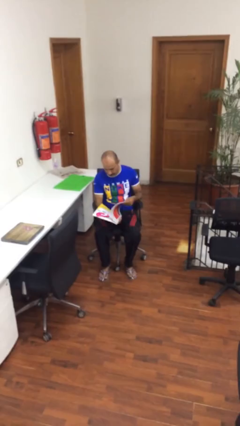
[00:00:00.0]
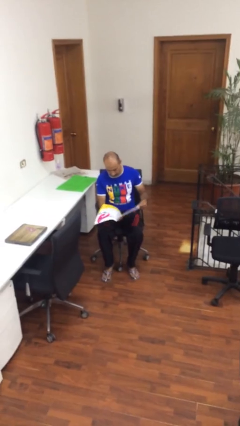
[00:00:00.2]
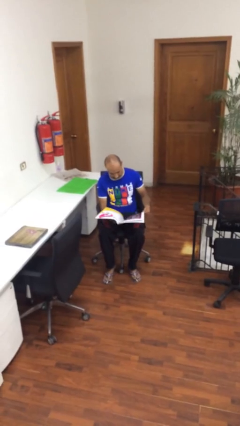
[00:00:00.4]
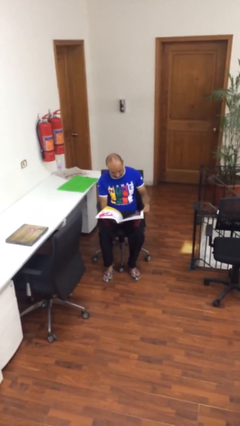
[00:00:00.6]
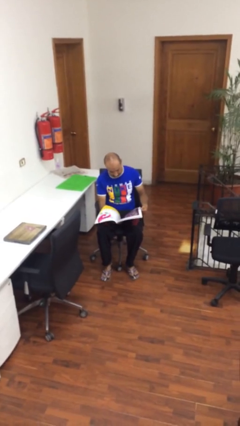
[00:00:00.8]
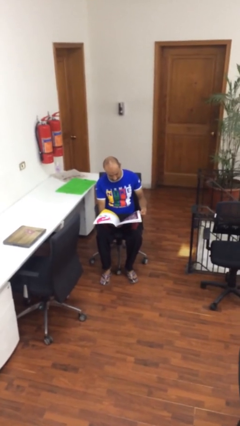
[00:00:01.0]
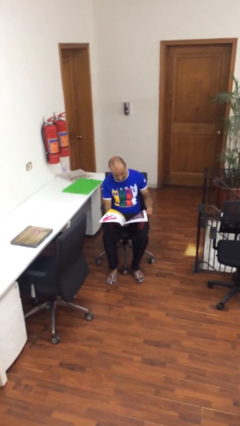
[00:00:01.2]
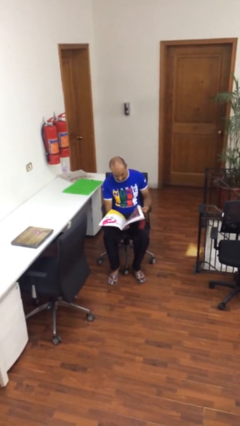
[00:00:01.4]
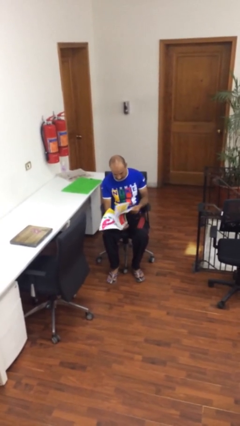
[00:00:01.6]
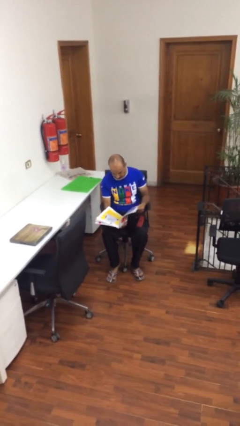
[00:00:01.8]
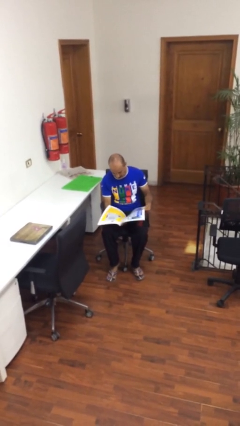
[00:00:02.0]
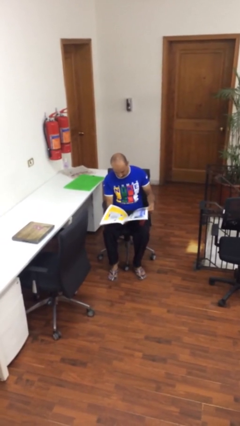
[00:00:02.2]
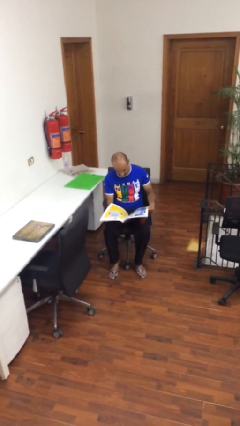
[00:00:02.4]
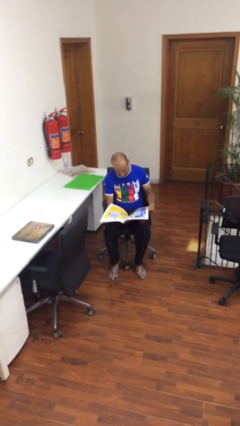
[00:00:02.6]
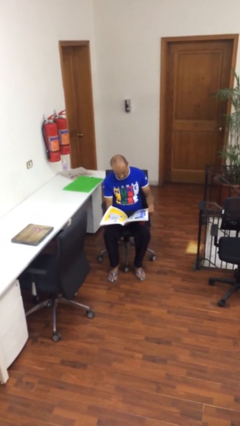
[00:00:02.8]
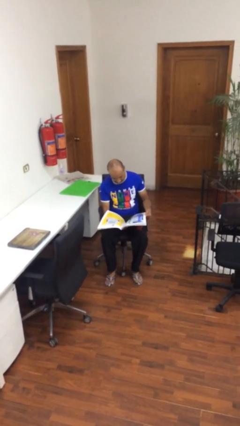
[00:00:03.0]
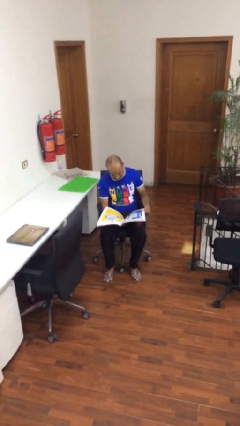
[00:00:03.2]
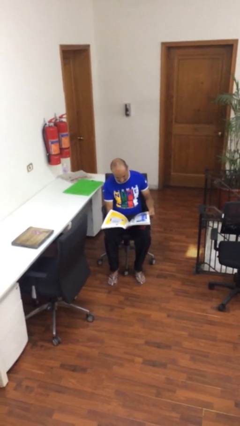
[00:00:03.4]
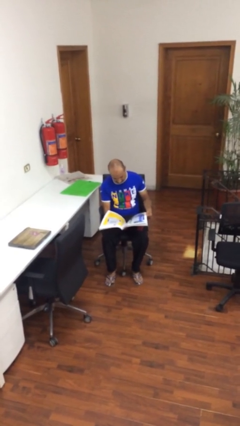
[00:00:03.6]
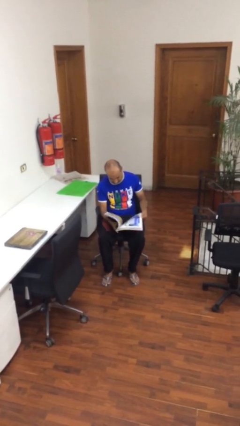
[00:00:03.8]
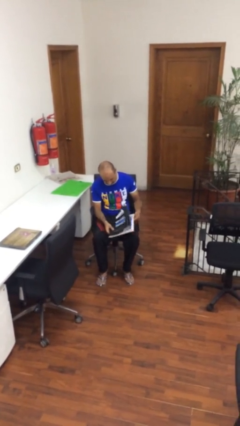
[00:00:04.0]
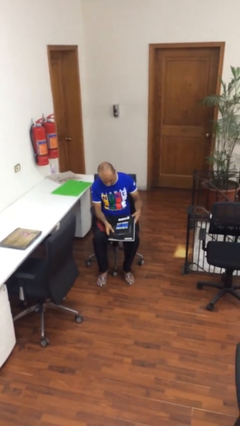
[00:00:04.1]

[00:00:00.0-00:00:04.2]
person reads document

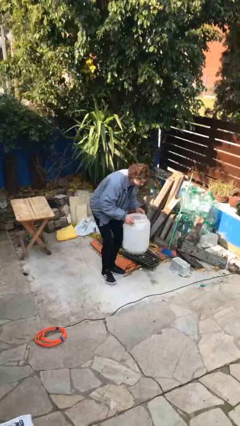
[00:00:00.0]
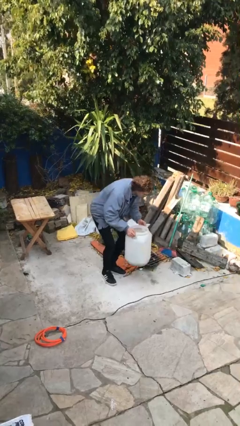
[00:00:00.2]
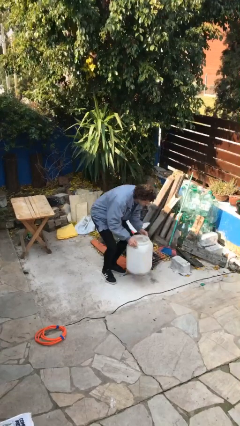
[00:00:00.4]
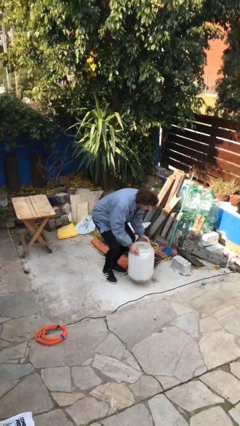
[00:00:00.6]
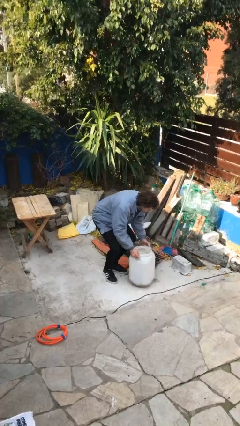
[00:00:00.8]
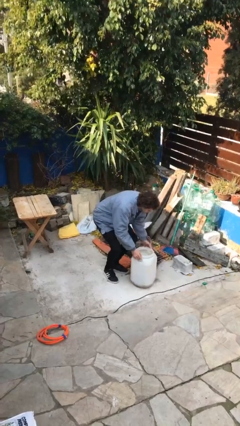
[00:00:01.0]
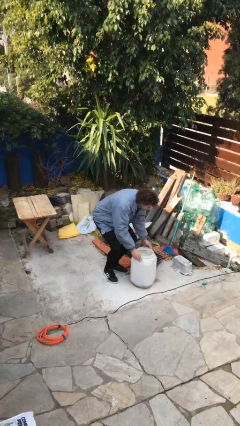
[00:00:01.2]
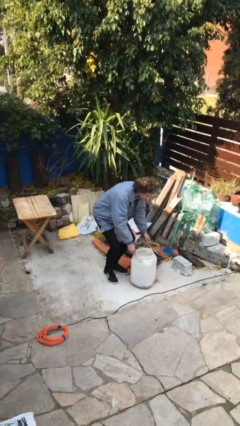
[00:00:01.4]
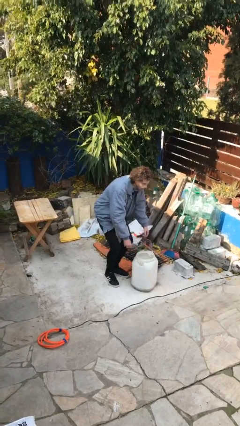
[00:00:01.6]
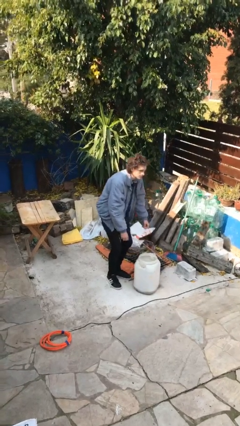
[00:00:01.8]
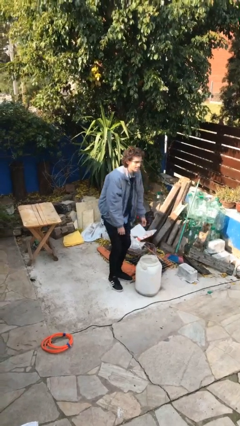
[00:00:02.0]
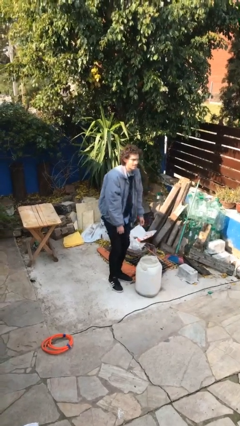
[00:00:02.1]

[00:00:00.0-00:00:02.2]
person puts down object on floor

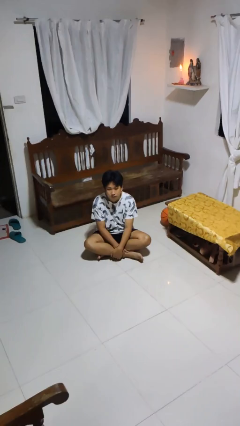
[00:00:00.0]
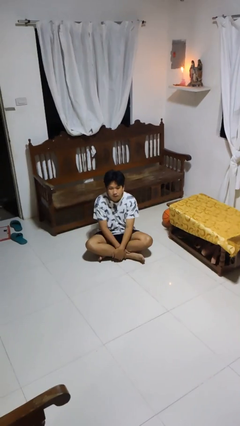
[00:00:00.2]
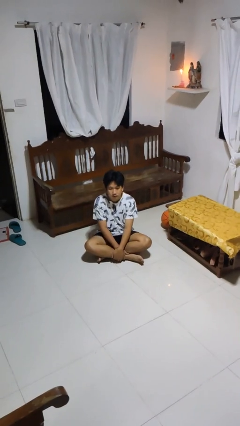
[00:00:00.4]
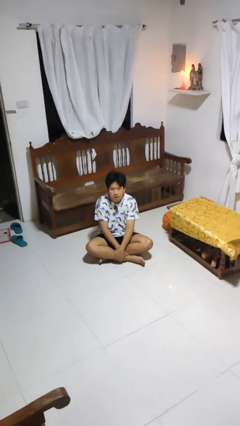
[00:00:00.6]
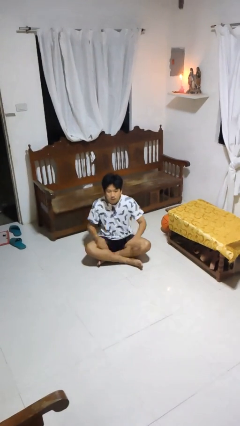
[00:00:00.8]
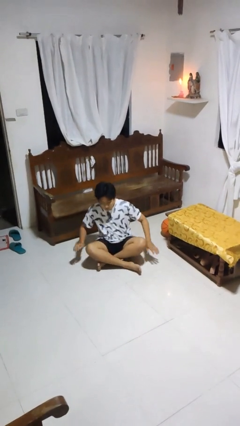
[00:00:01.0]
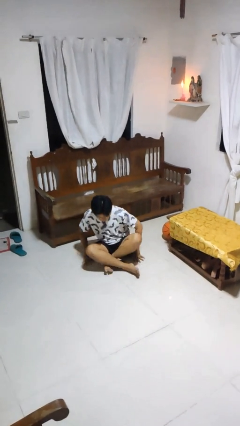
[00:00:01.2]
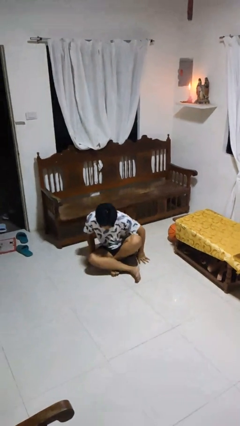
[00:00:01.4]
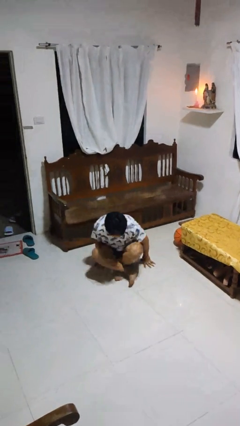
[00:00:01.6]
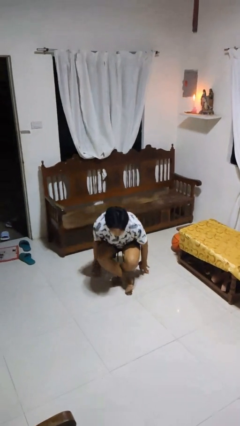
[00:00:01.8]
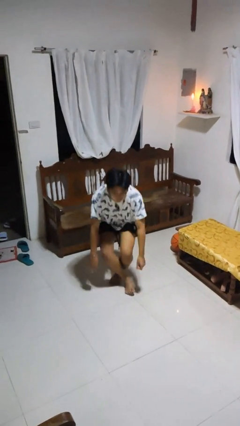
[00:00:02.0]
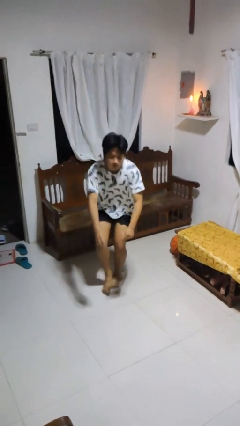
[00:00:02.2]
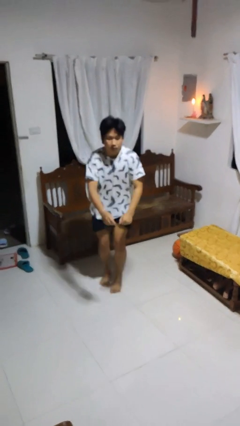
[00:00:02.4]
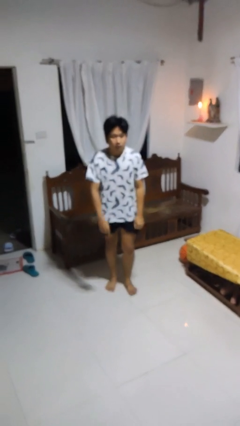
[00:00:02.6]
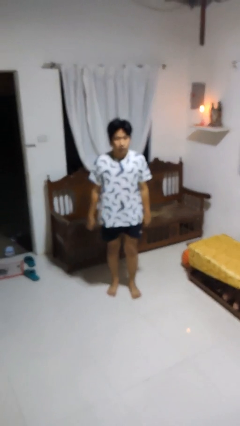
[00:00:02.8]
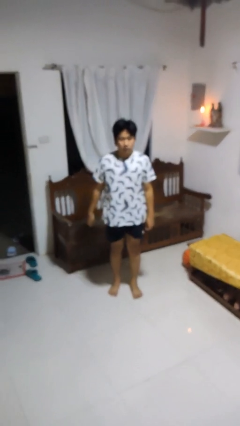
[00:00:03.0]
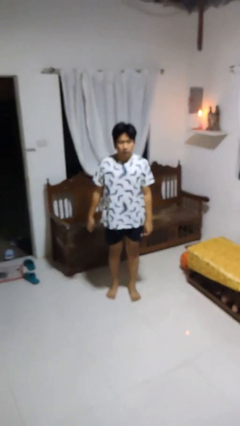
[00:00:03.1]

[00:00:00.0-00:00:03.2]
person stands up from floor

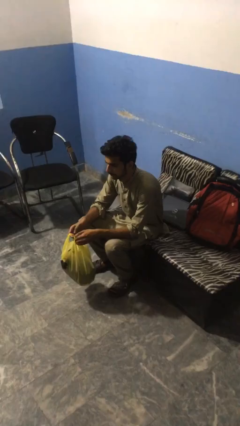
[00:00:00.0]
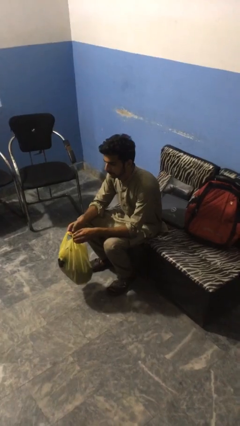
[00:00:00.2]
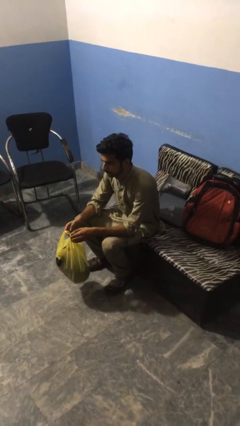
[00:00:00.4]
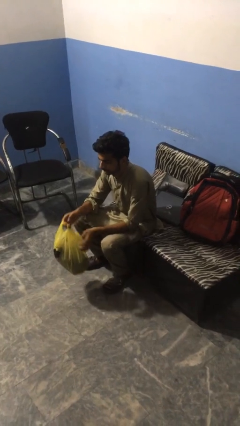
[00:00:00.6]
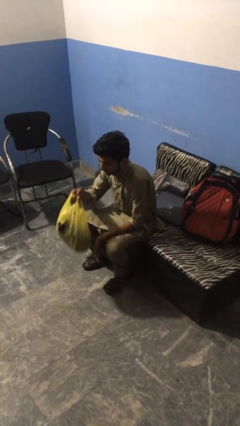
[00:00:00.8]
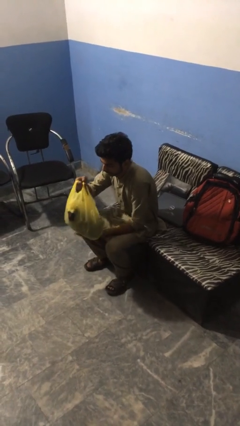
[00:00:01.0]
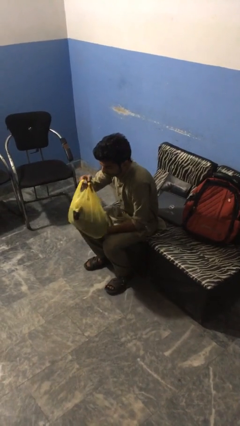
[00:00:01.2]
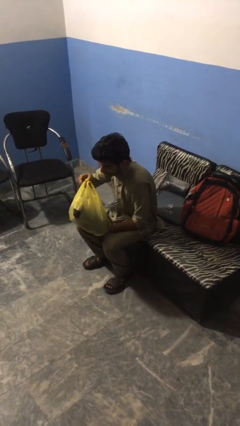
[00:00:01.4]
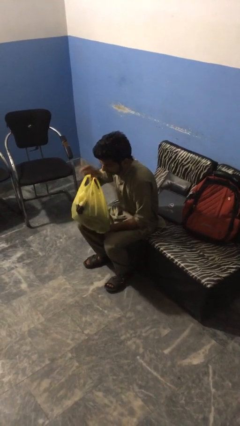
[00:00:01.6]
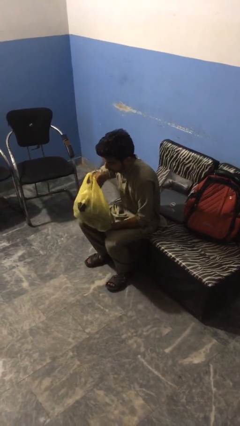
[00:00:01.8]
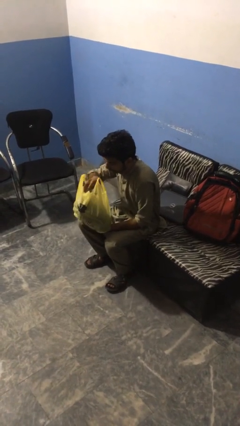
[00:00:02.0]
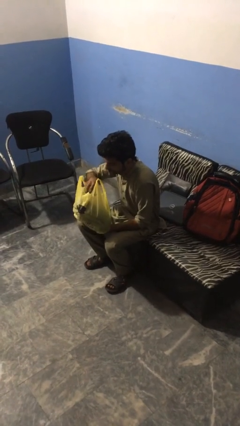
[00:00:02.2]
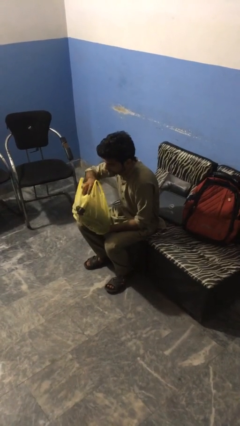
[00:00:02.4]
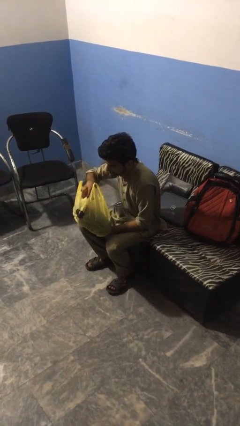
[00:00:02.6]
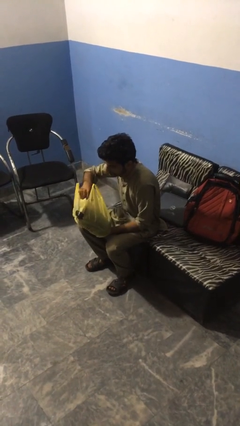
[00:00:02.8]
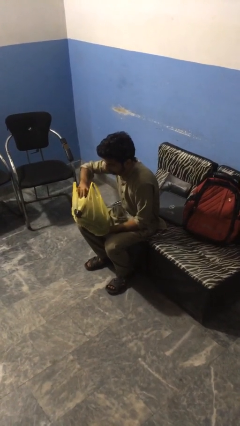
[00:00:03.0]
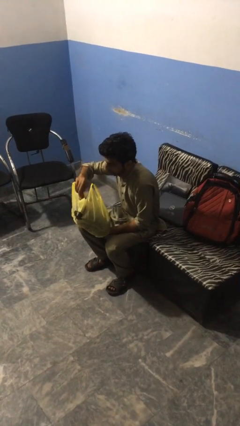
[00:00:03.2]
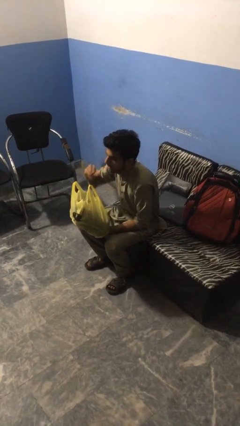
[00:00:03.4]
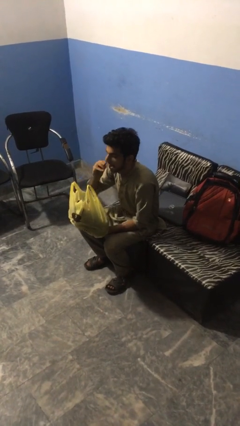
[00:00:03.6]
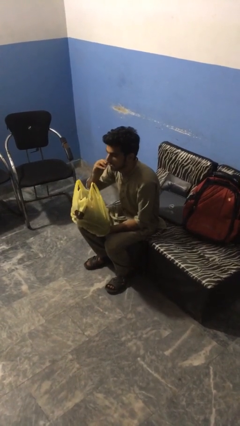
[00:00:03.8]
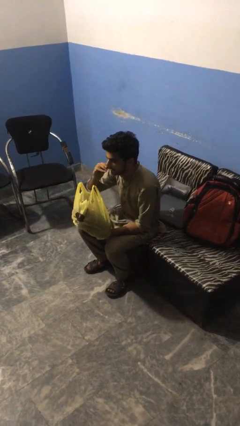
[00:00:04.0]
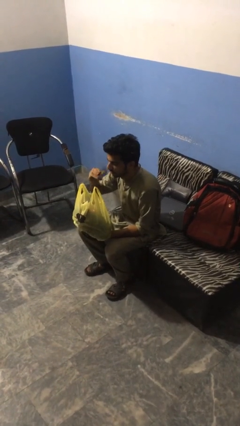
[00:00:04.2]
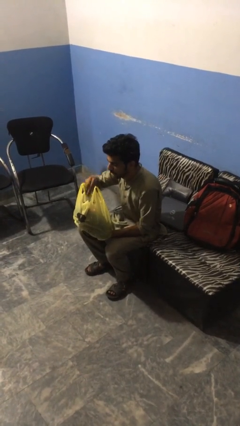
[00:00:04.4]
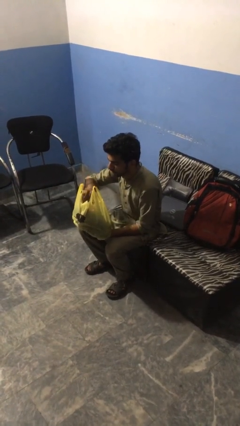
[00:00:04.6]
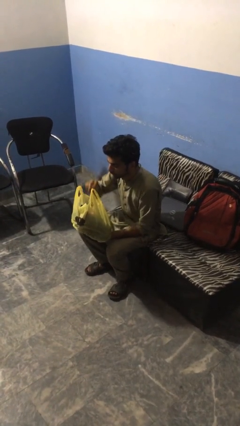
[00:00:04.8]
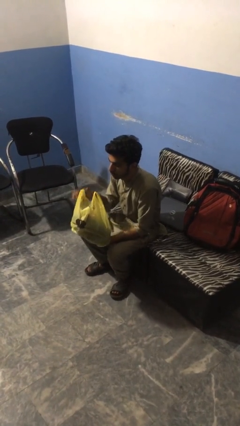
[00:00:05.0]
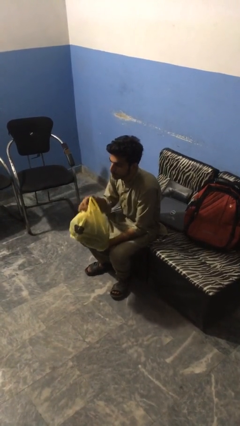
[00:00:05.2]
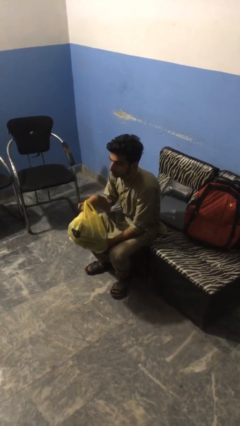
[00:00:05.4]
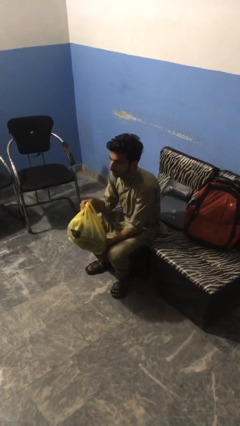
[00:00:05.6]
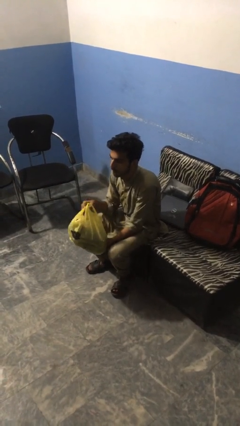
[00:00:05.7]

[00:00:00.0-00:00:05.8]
person eats snack from bag

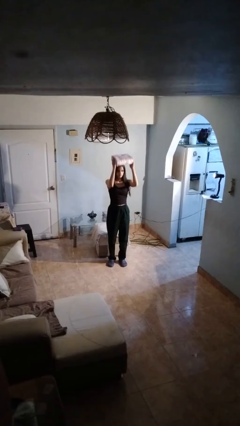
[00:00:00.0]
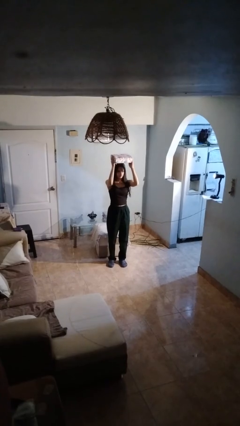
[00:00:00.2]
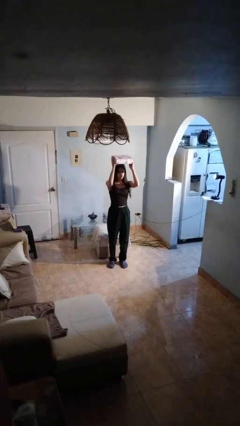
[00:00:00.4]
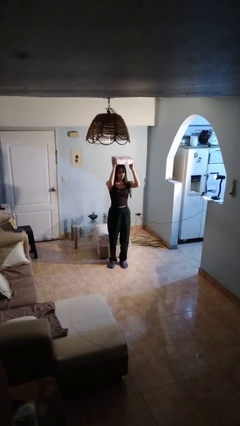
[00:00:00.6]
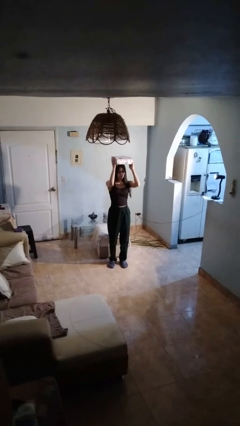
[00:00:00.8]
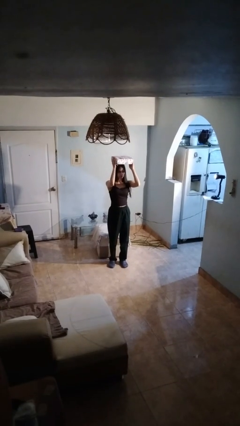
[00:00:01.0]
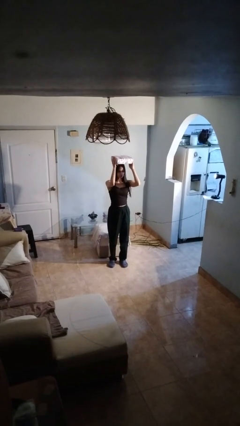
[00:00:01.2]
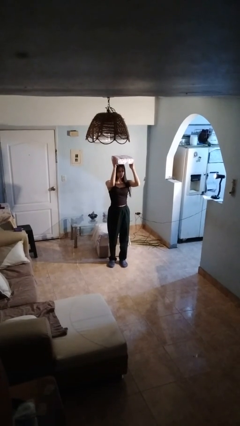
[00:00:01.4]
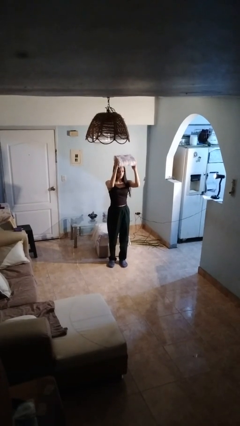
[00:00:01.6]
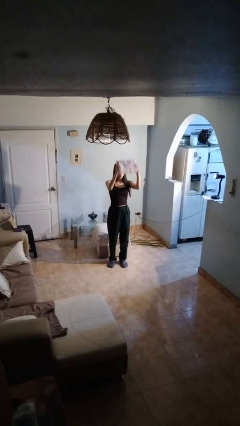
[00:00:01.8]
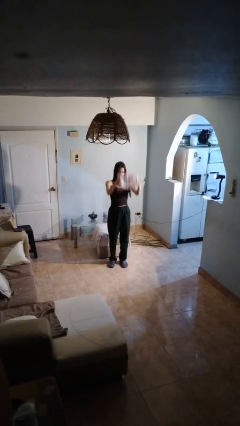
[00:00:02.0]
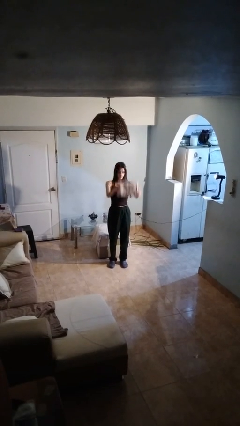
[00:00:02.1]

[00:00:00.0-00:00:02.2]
person holds object above head
